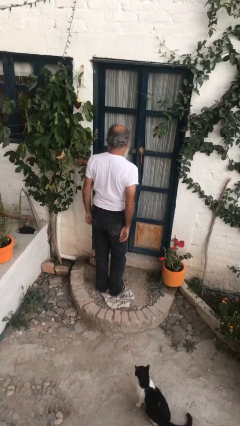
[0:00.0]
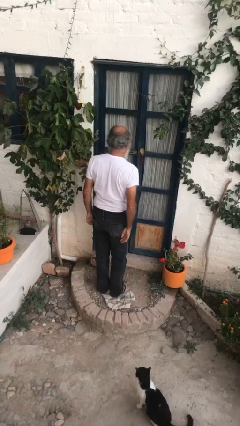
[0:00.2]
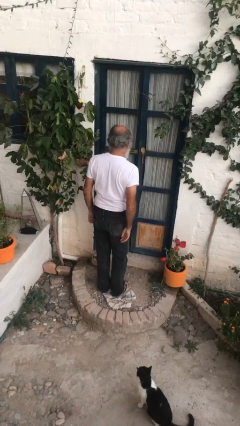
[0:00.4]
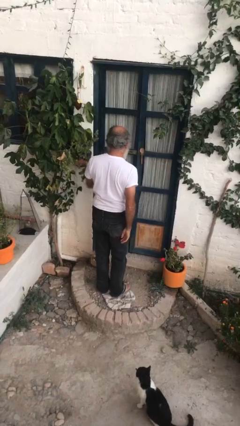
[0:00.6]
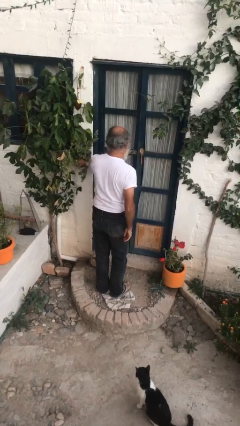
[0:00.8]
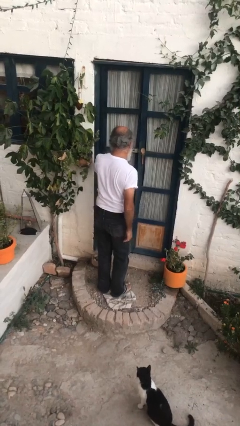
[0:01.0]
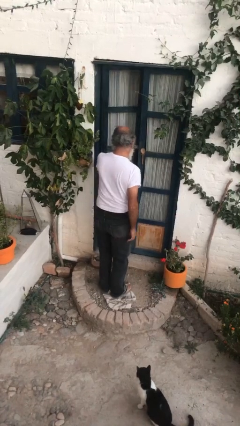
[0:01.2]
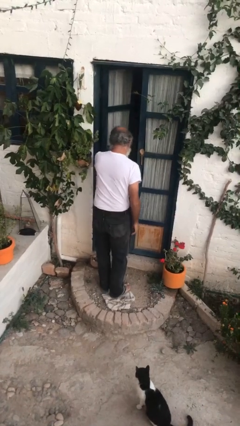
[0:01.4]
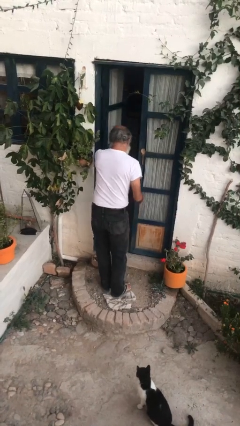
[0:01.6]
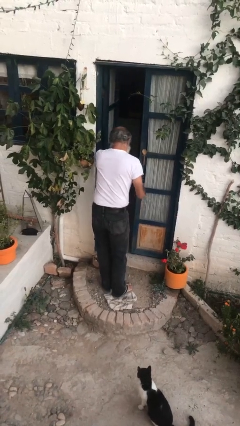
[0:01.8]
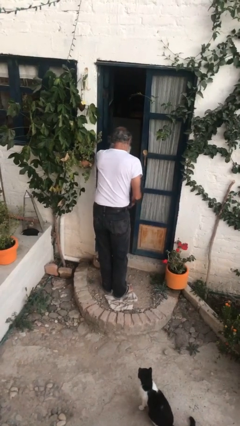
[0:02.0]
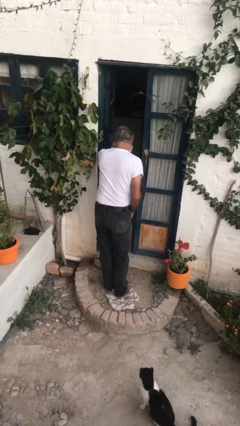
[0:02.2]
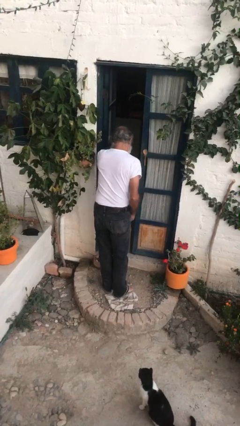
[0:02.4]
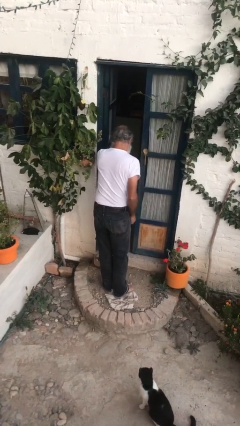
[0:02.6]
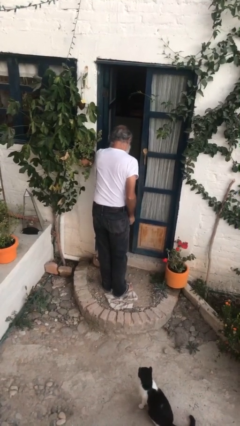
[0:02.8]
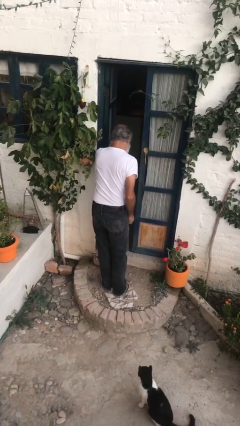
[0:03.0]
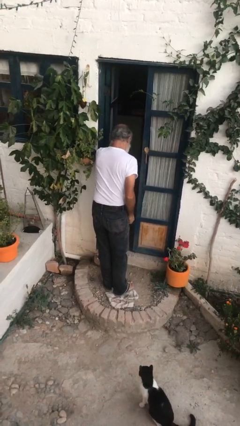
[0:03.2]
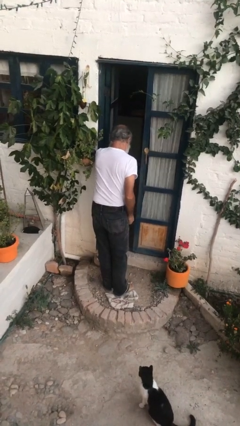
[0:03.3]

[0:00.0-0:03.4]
person opens facility door

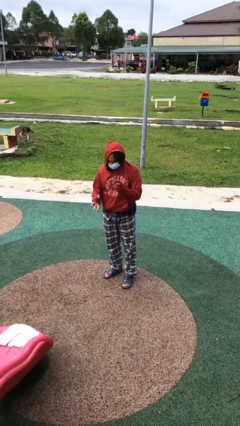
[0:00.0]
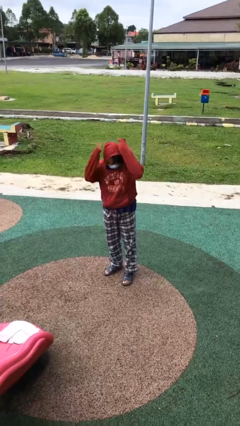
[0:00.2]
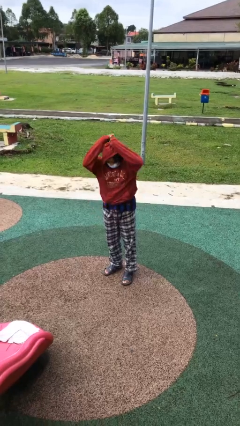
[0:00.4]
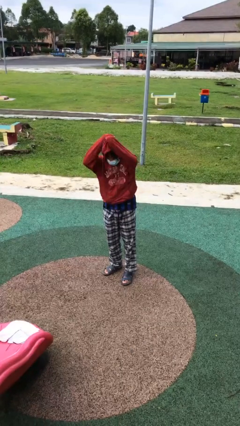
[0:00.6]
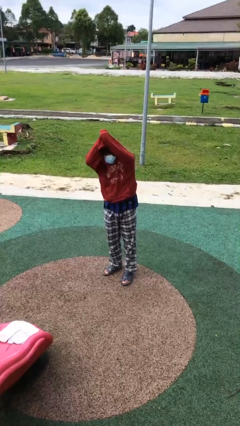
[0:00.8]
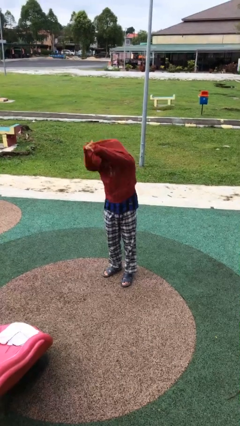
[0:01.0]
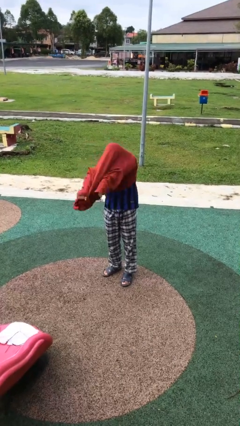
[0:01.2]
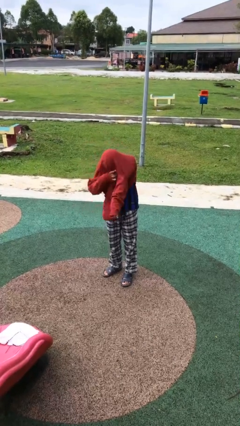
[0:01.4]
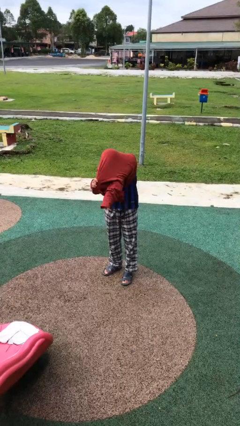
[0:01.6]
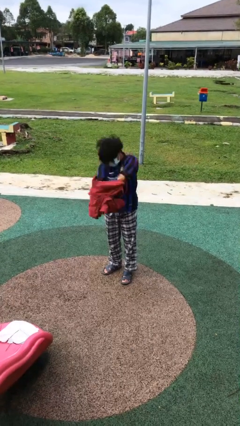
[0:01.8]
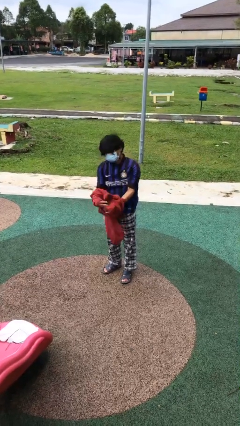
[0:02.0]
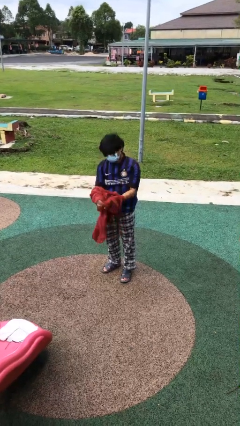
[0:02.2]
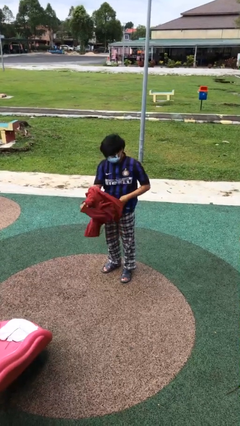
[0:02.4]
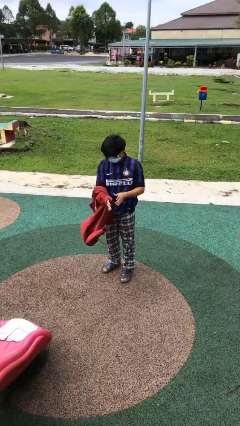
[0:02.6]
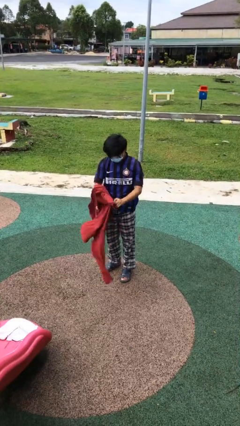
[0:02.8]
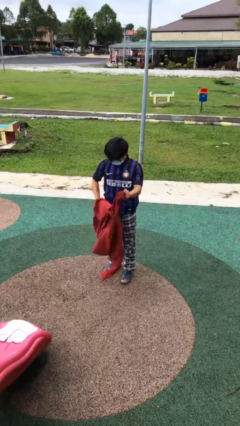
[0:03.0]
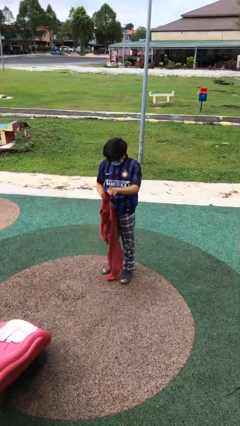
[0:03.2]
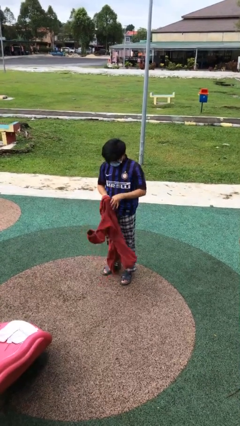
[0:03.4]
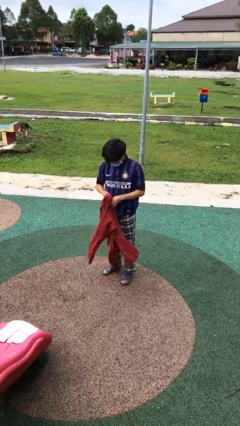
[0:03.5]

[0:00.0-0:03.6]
person takes off hoodie

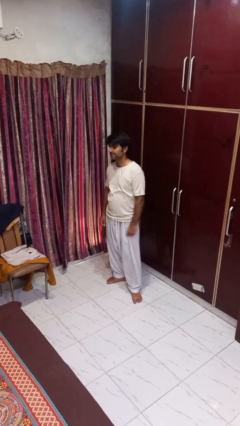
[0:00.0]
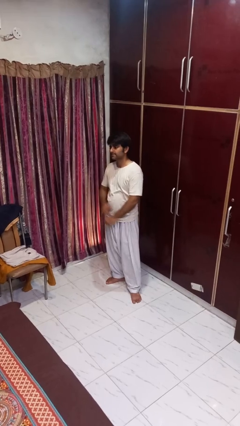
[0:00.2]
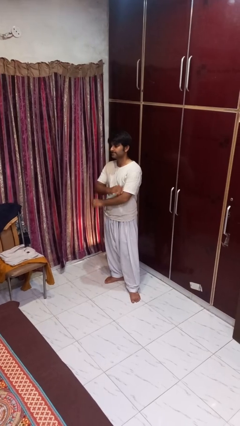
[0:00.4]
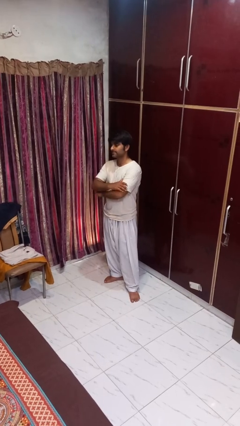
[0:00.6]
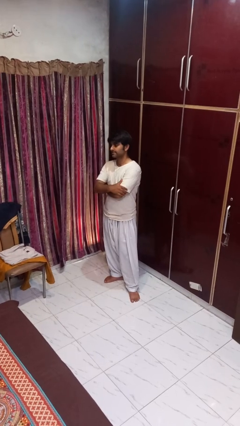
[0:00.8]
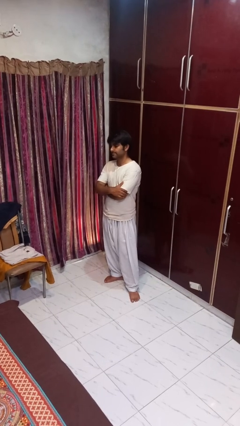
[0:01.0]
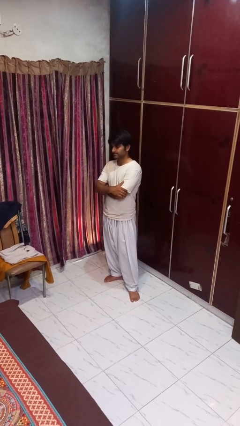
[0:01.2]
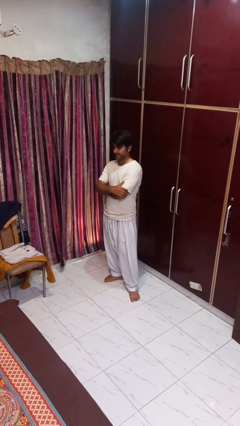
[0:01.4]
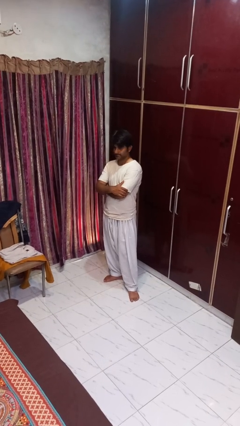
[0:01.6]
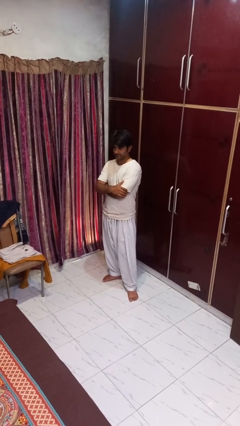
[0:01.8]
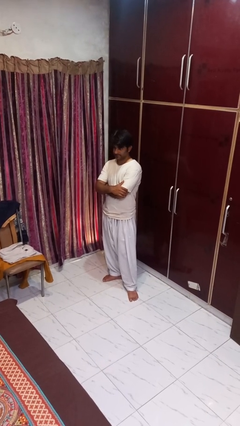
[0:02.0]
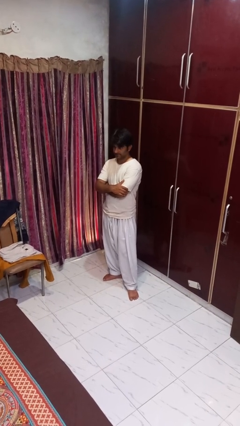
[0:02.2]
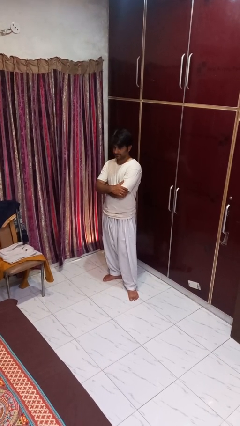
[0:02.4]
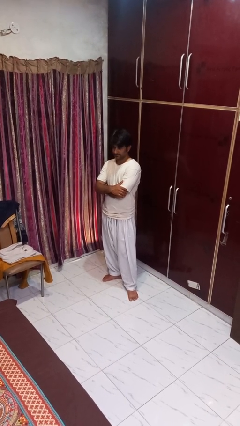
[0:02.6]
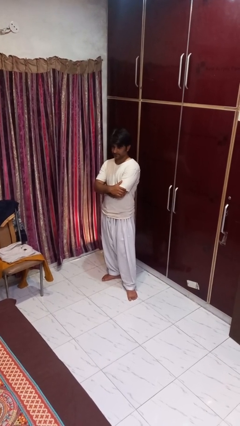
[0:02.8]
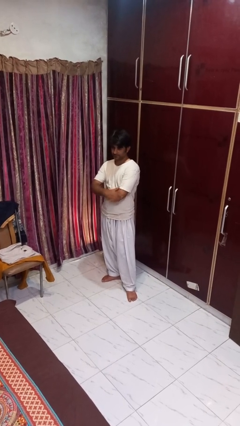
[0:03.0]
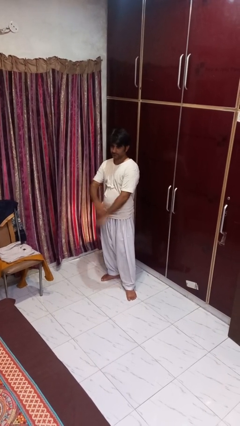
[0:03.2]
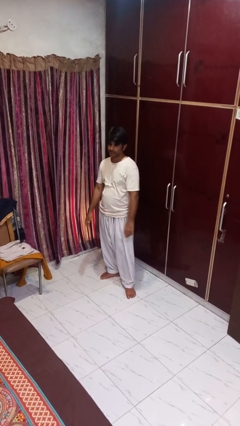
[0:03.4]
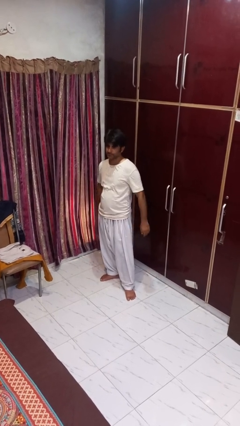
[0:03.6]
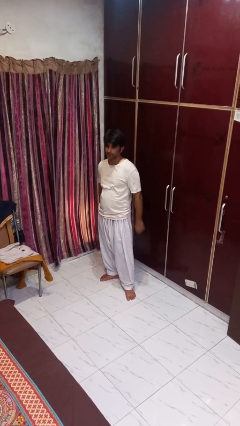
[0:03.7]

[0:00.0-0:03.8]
person crosses arms

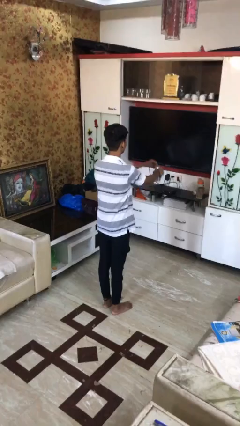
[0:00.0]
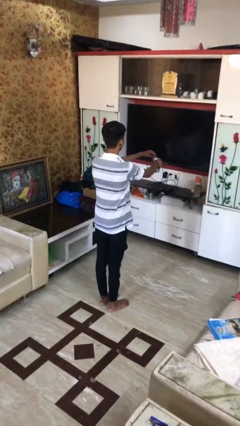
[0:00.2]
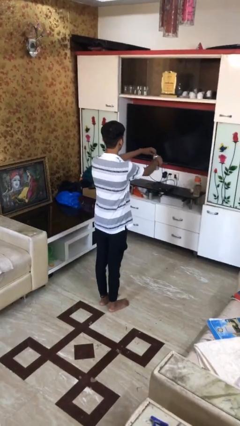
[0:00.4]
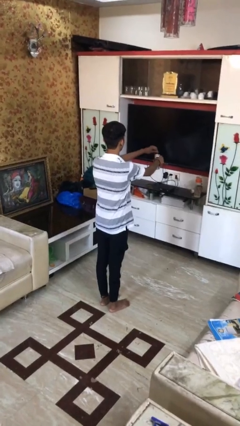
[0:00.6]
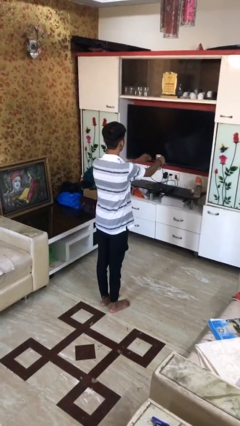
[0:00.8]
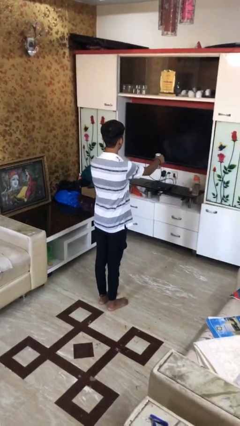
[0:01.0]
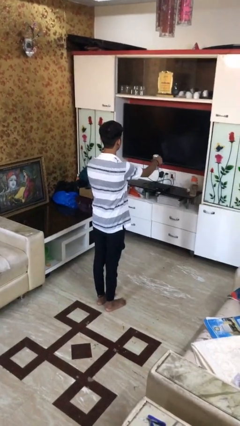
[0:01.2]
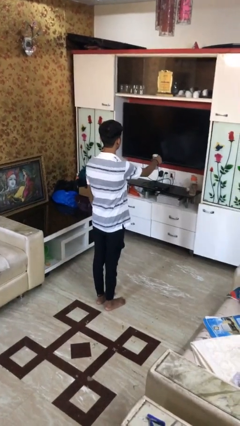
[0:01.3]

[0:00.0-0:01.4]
person opens beverage can

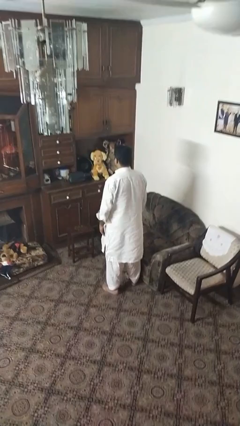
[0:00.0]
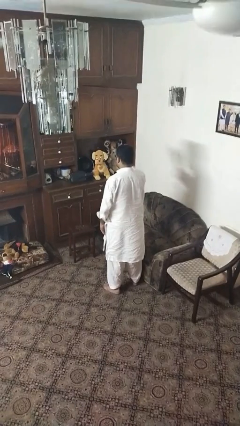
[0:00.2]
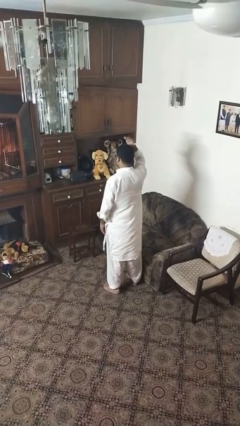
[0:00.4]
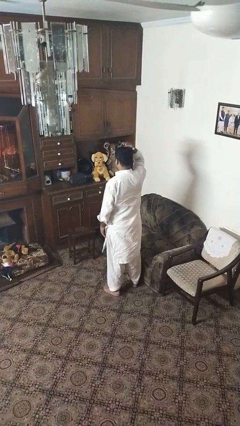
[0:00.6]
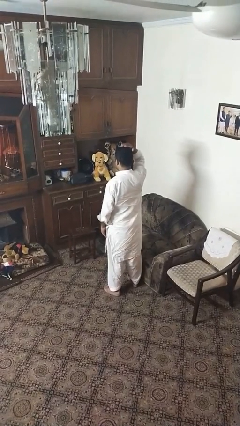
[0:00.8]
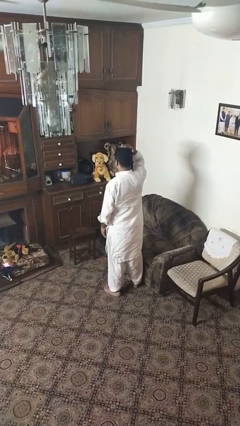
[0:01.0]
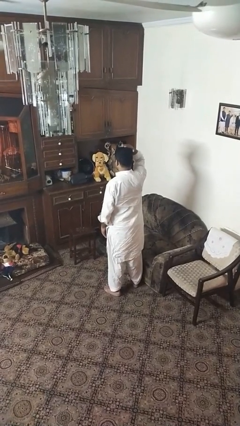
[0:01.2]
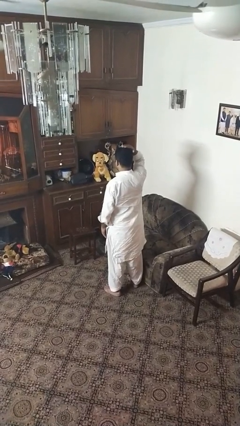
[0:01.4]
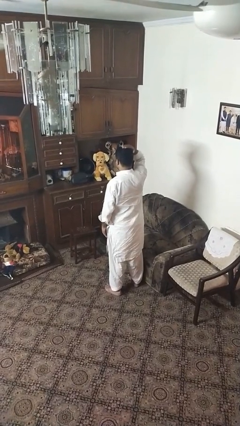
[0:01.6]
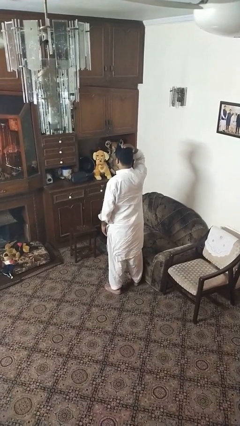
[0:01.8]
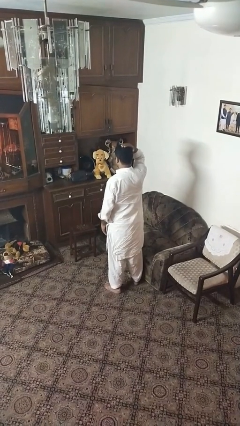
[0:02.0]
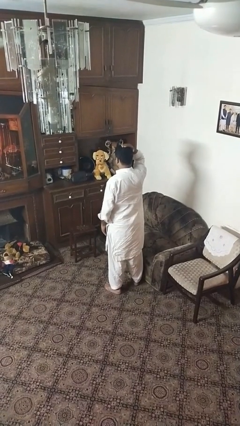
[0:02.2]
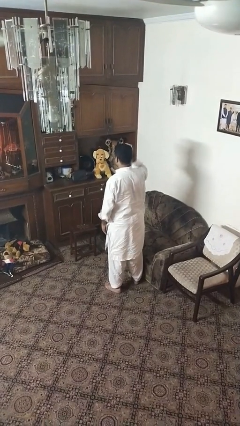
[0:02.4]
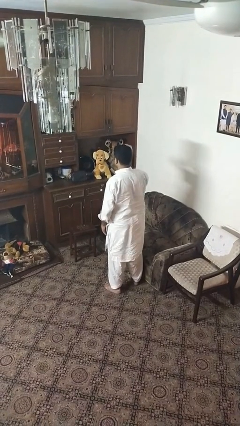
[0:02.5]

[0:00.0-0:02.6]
person pats head

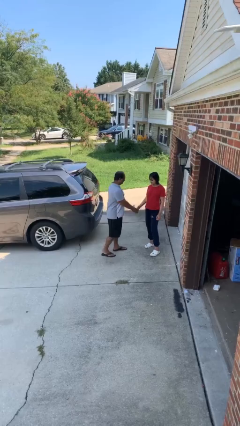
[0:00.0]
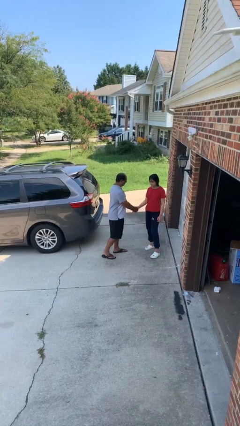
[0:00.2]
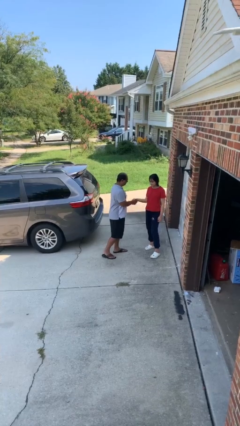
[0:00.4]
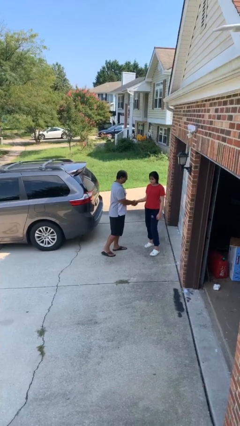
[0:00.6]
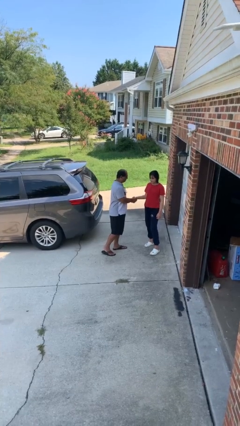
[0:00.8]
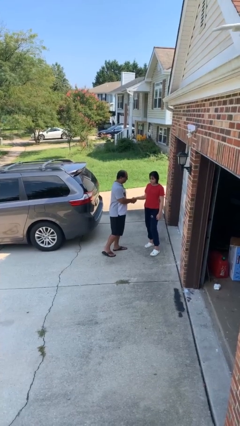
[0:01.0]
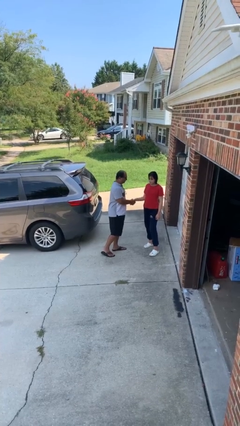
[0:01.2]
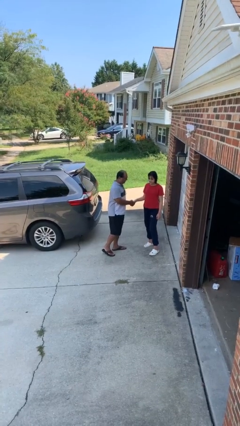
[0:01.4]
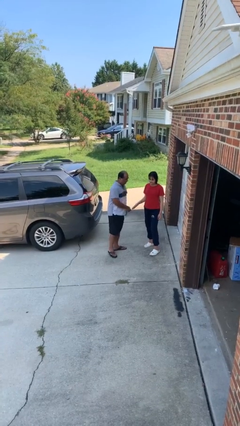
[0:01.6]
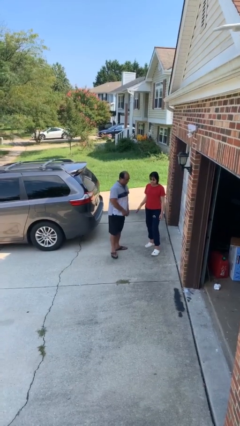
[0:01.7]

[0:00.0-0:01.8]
person shakes hand

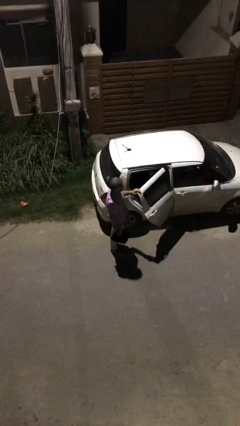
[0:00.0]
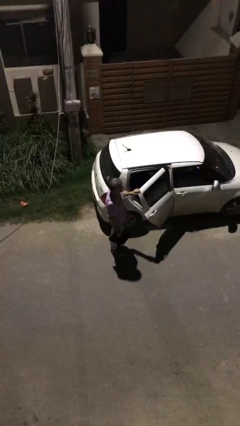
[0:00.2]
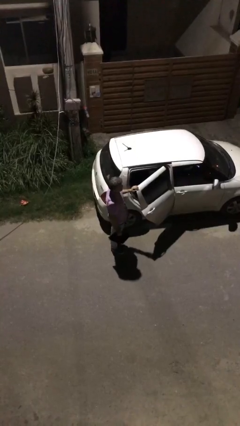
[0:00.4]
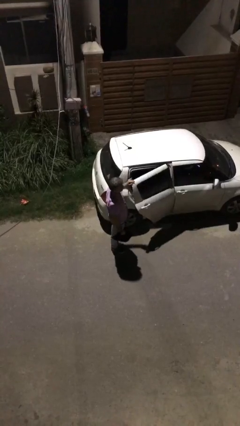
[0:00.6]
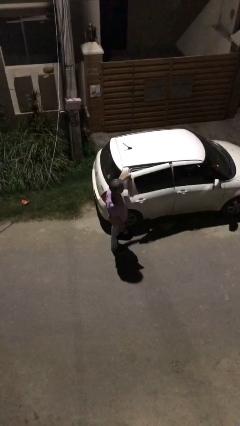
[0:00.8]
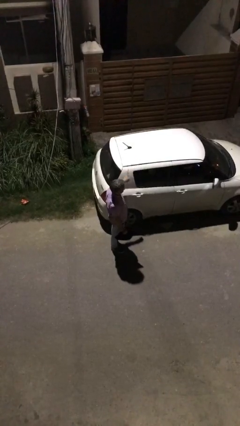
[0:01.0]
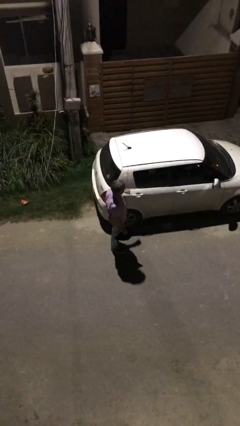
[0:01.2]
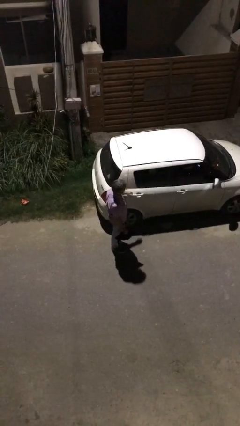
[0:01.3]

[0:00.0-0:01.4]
person closes car door
